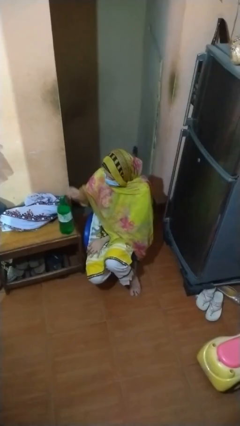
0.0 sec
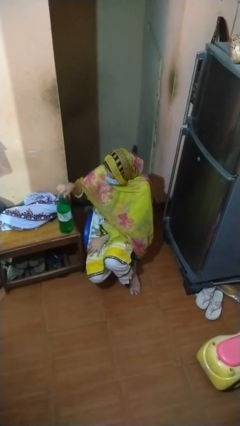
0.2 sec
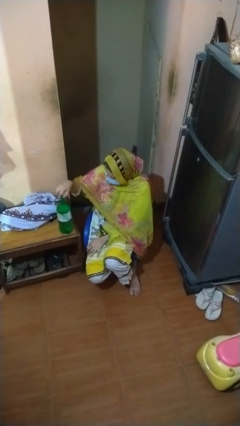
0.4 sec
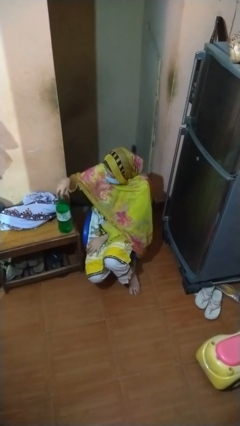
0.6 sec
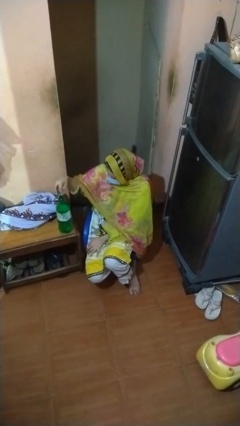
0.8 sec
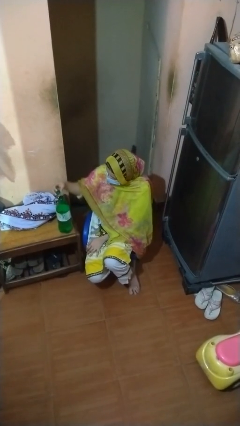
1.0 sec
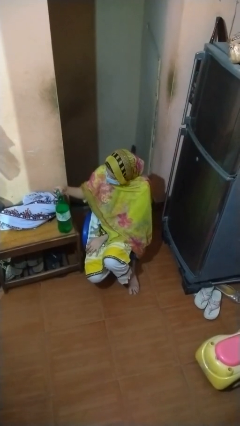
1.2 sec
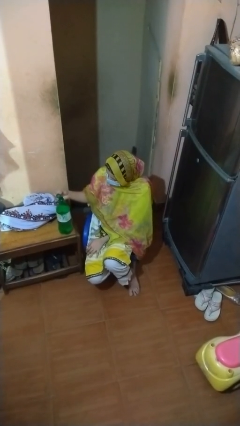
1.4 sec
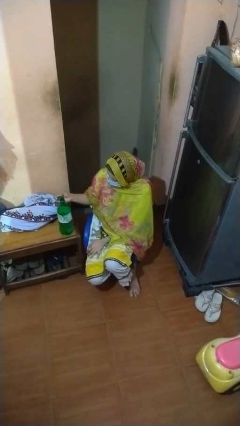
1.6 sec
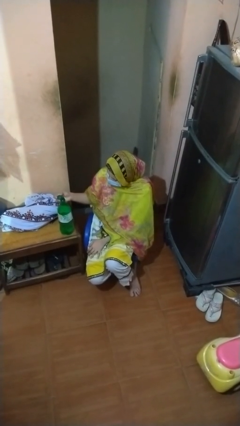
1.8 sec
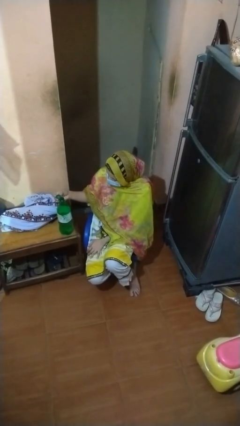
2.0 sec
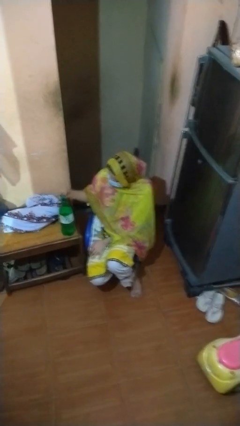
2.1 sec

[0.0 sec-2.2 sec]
person unscrews lid from bottle

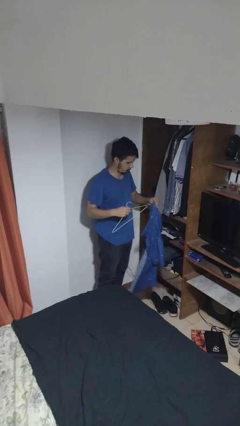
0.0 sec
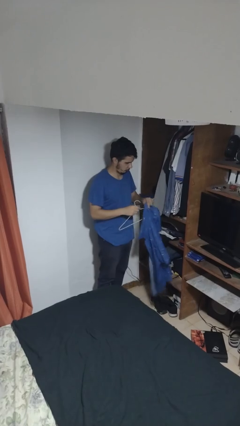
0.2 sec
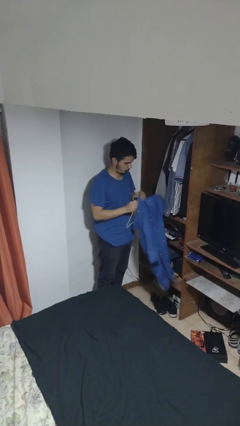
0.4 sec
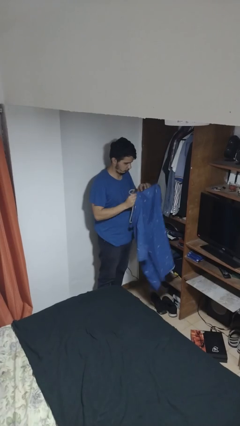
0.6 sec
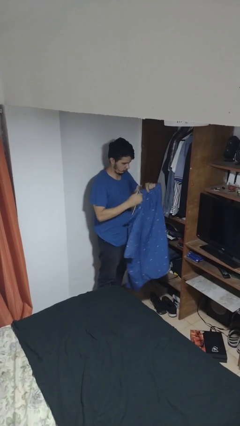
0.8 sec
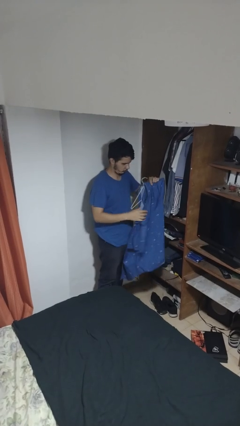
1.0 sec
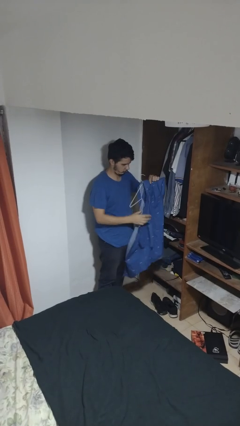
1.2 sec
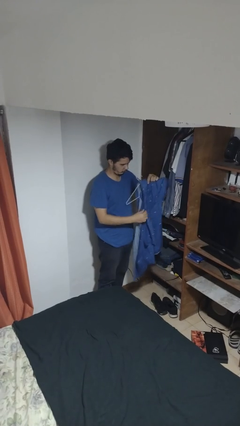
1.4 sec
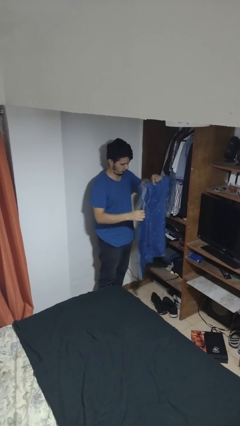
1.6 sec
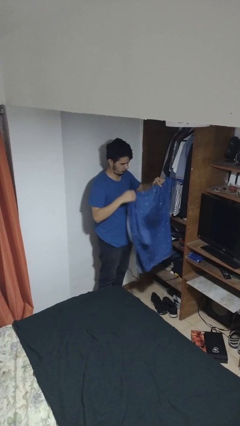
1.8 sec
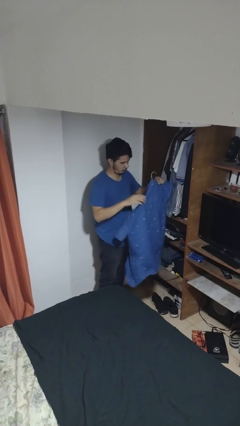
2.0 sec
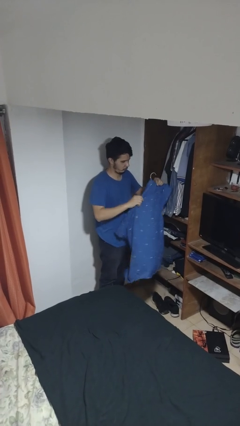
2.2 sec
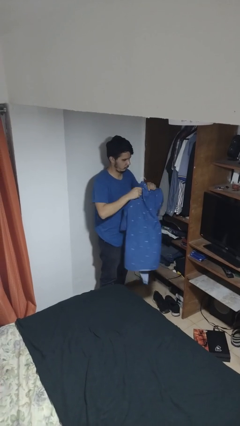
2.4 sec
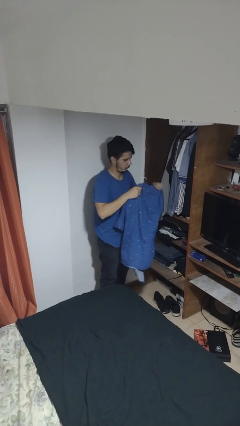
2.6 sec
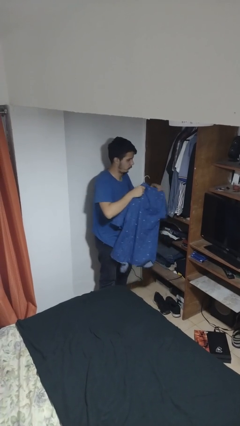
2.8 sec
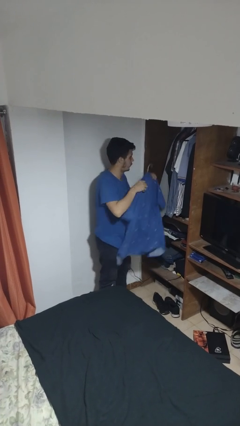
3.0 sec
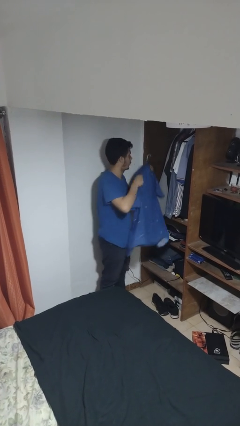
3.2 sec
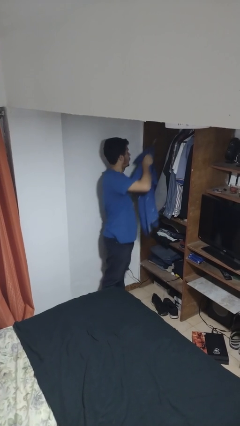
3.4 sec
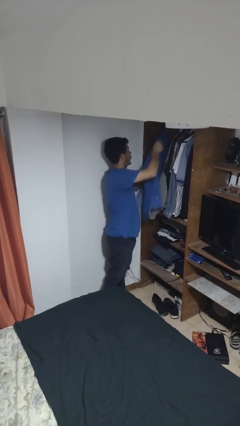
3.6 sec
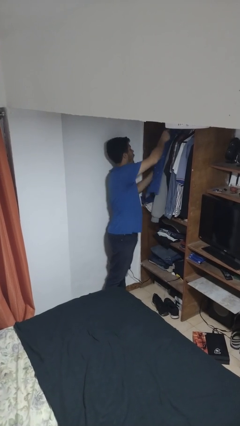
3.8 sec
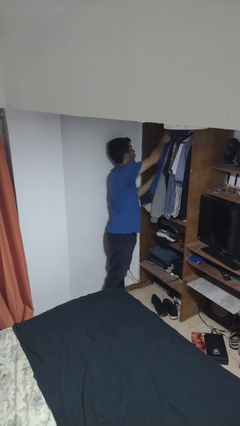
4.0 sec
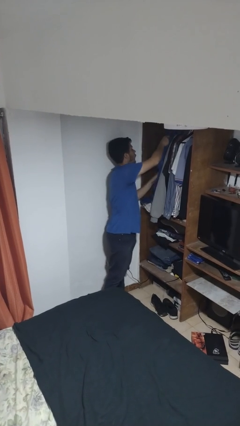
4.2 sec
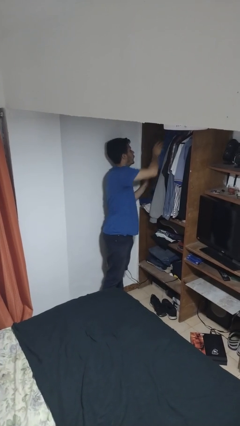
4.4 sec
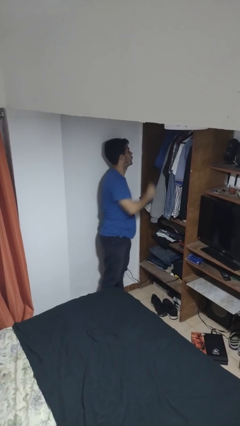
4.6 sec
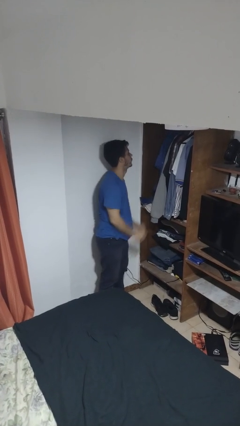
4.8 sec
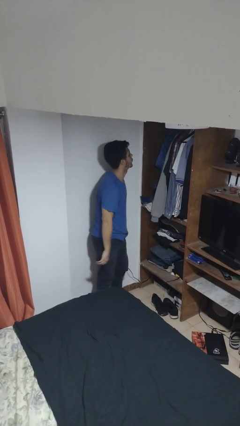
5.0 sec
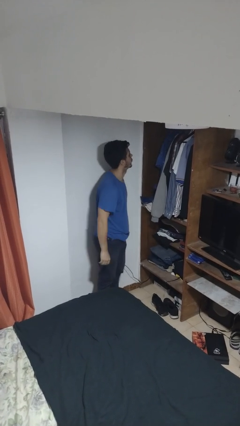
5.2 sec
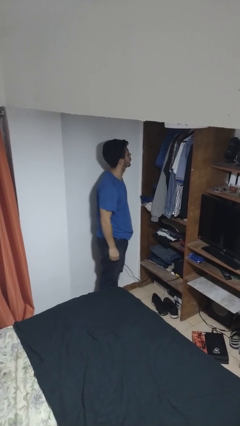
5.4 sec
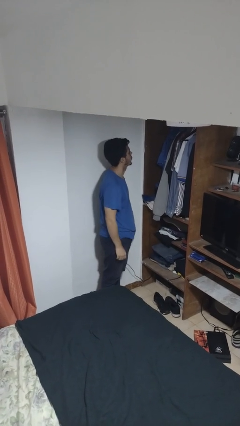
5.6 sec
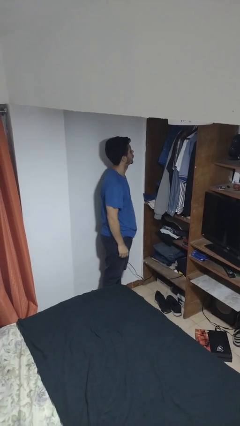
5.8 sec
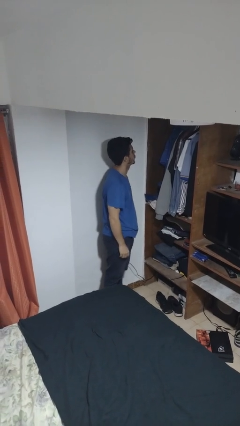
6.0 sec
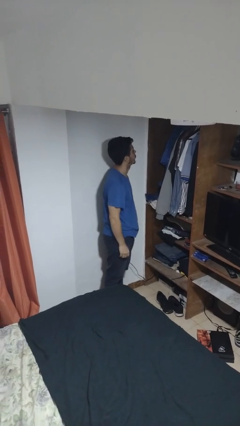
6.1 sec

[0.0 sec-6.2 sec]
person puts clothes into closet

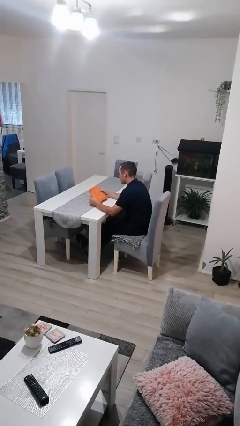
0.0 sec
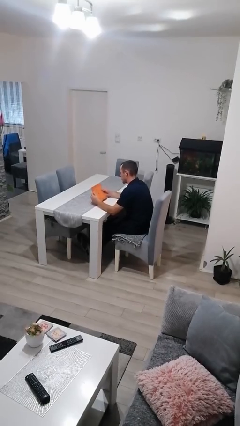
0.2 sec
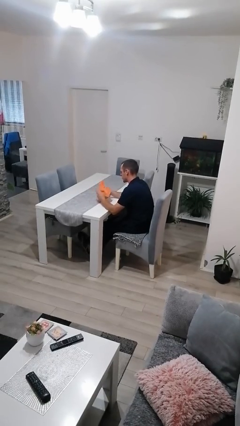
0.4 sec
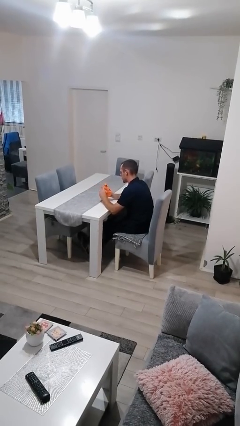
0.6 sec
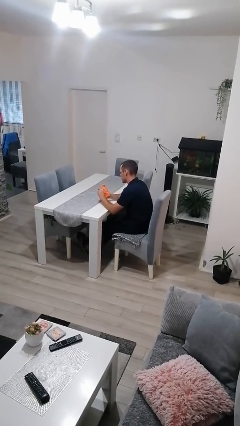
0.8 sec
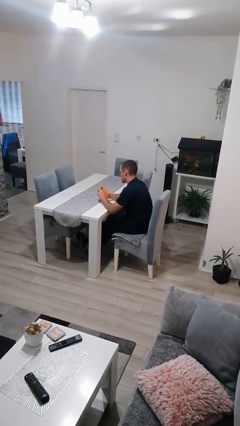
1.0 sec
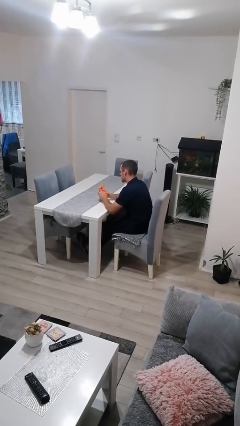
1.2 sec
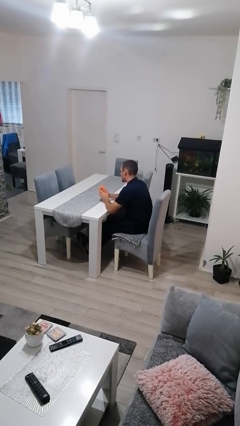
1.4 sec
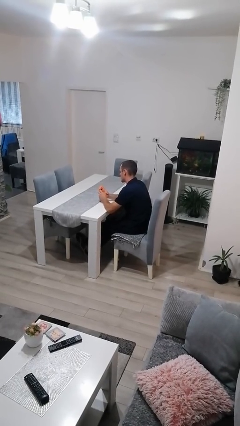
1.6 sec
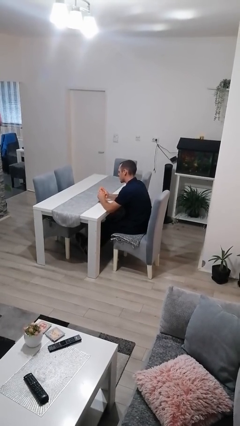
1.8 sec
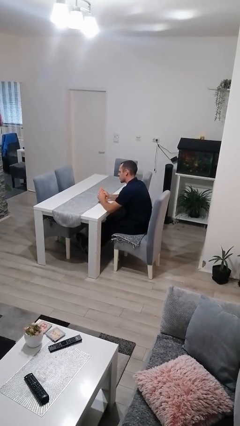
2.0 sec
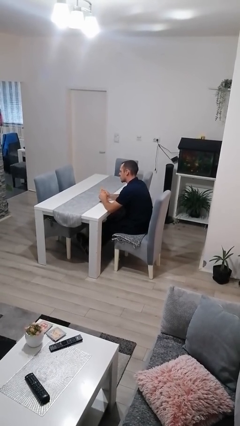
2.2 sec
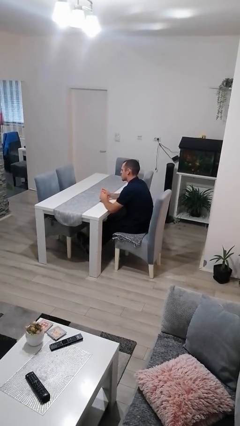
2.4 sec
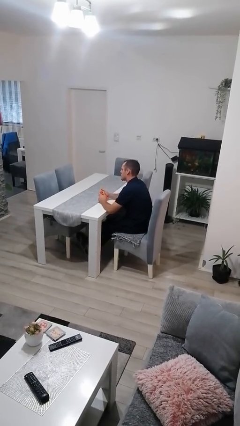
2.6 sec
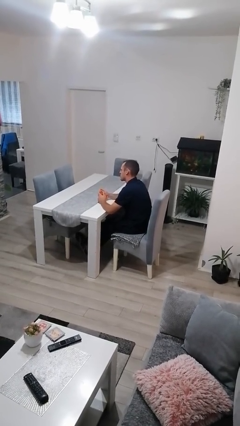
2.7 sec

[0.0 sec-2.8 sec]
person crumples paper

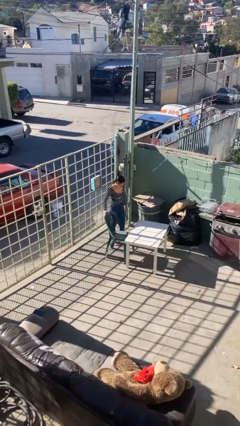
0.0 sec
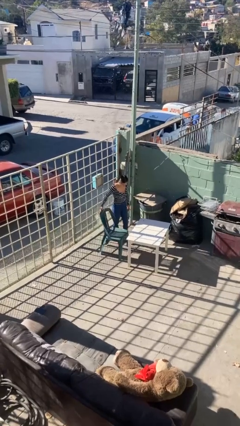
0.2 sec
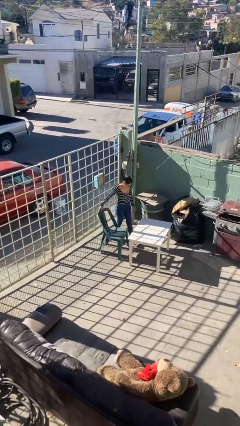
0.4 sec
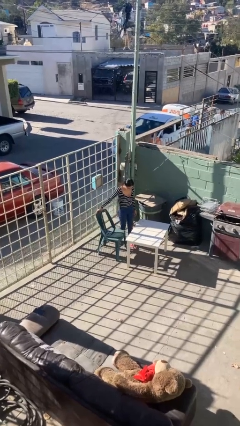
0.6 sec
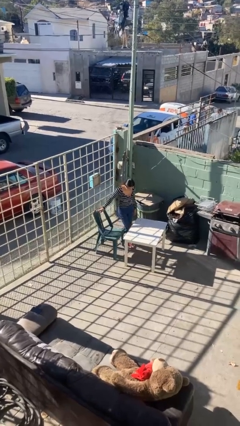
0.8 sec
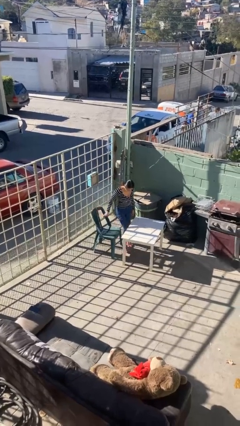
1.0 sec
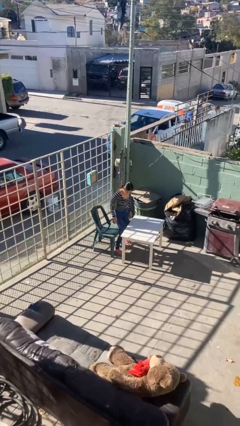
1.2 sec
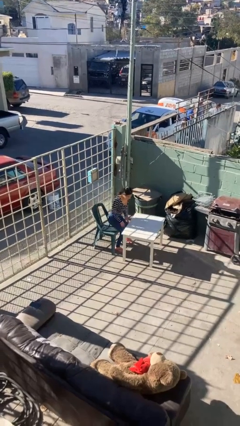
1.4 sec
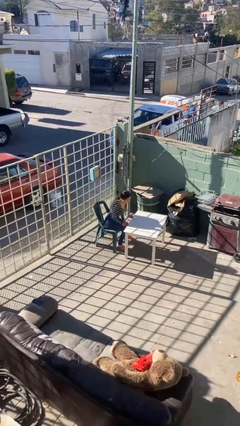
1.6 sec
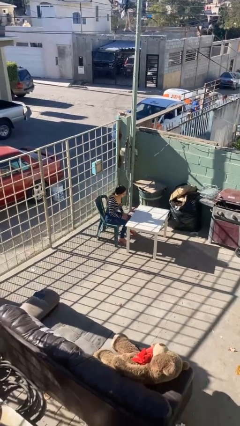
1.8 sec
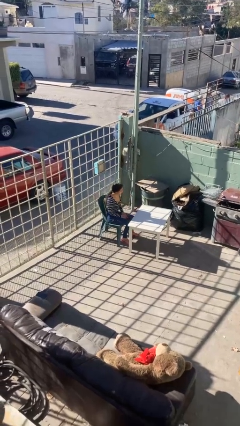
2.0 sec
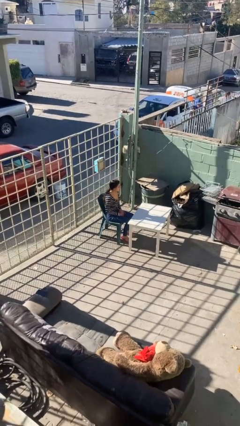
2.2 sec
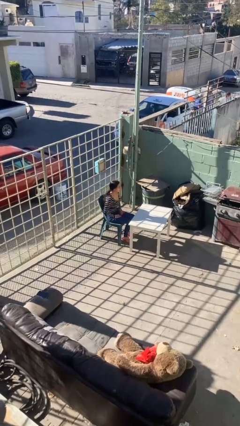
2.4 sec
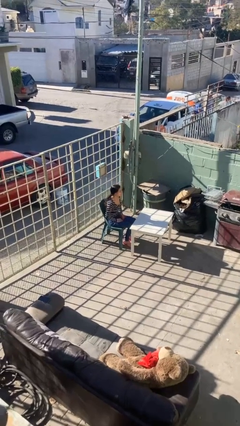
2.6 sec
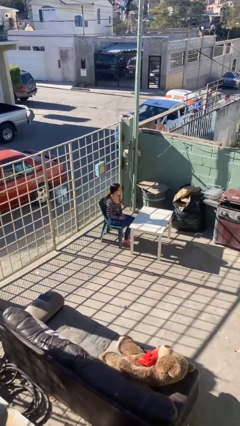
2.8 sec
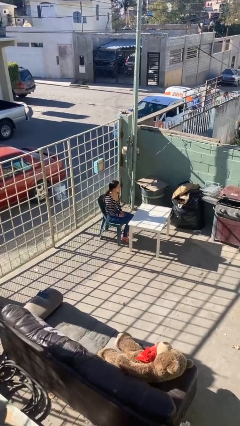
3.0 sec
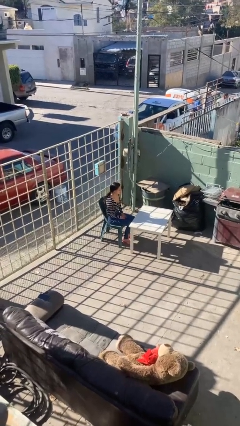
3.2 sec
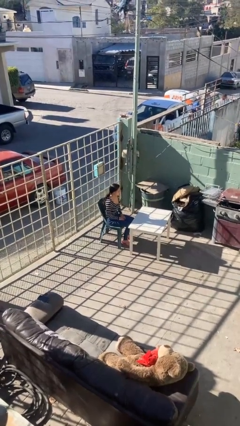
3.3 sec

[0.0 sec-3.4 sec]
person sits down

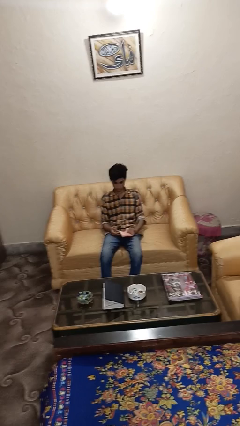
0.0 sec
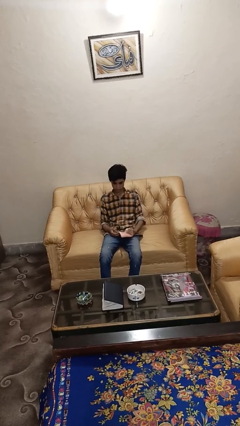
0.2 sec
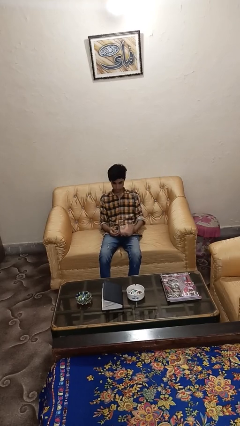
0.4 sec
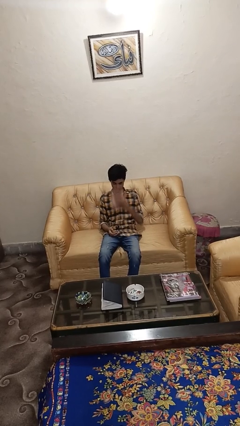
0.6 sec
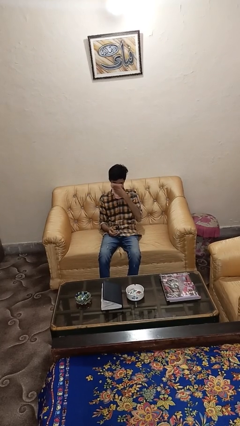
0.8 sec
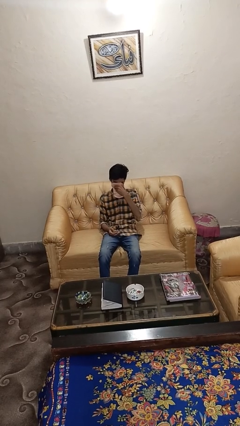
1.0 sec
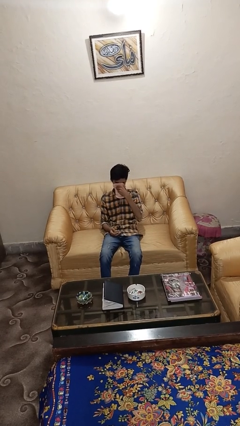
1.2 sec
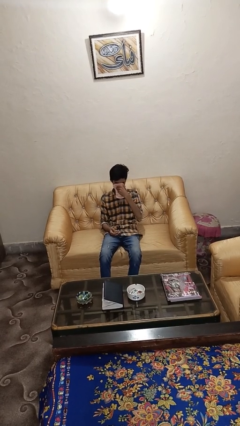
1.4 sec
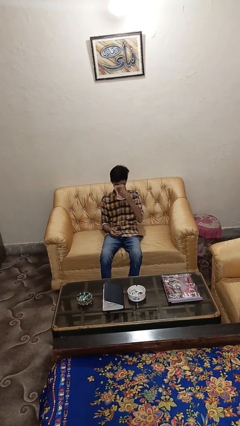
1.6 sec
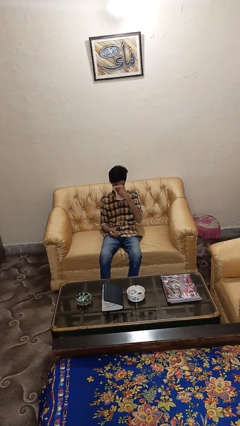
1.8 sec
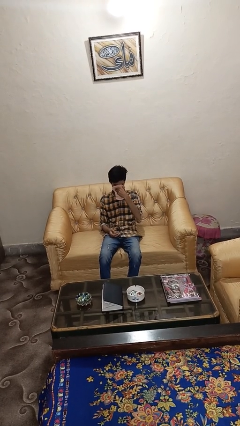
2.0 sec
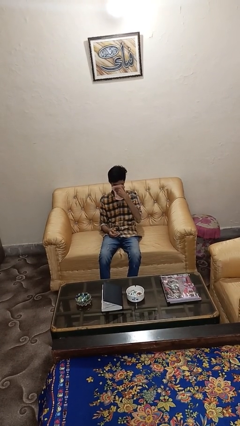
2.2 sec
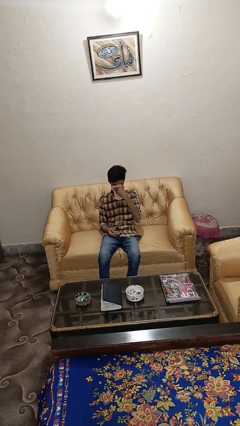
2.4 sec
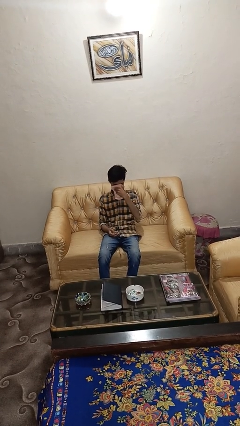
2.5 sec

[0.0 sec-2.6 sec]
person blows nose

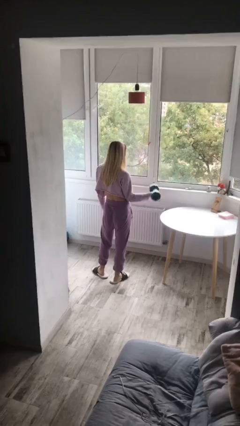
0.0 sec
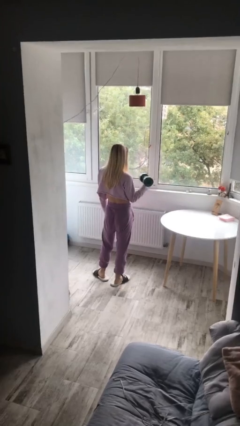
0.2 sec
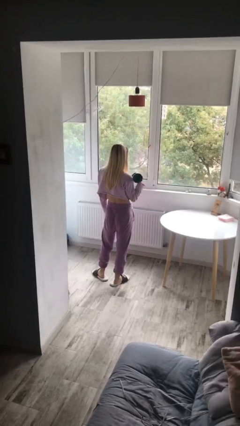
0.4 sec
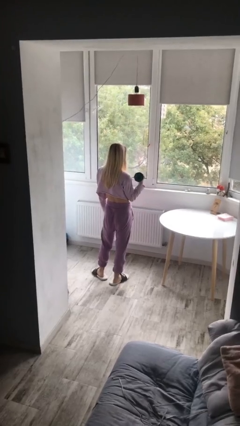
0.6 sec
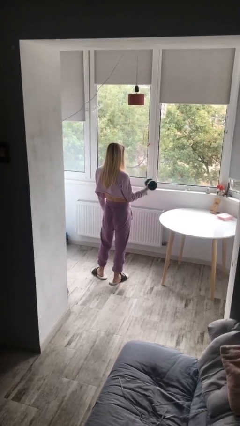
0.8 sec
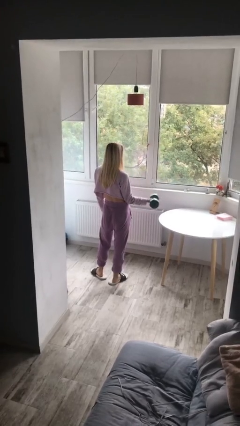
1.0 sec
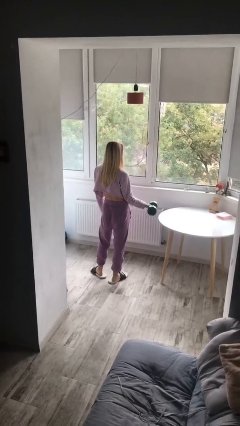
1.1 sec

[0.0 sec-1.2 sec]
person lifts dumbbells
